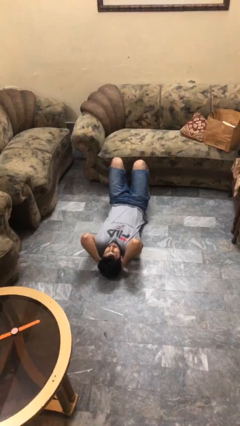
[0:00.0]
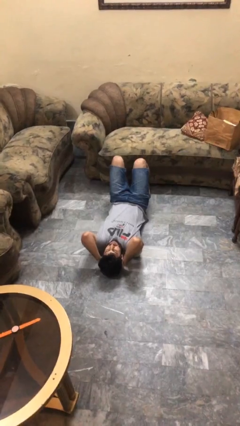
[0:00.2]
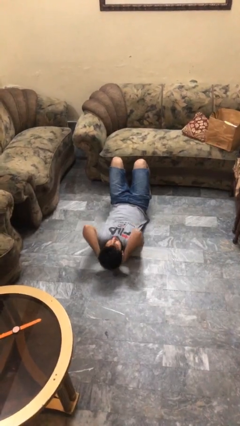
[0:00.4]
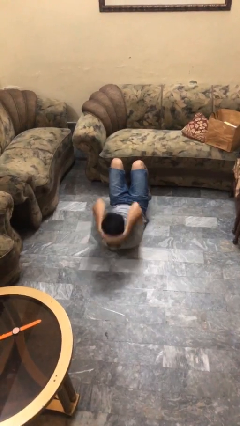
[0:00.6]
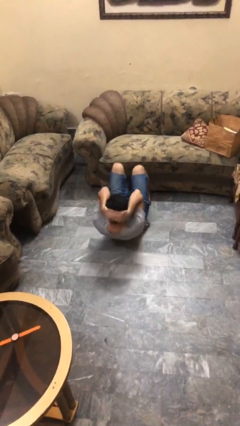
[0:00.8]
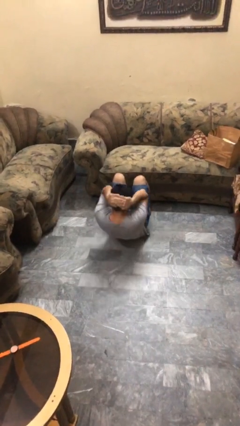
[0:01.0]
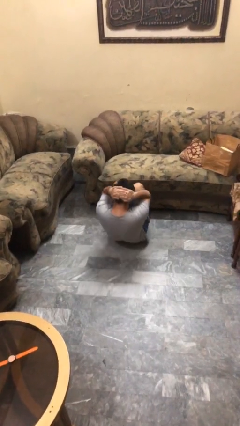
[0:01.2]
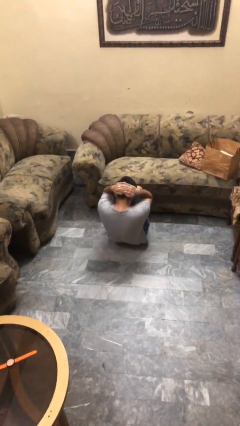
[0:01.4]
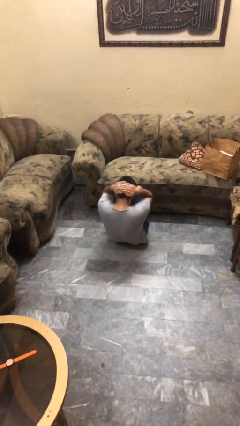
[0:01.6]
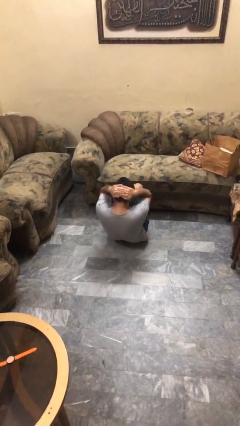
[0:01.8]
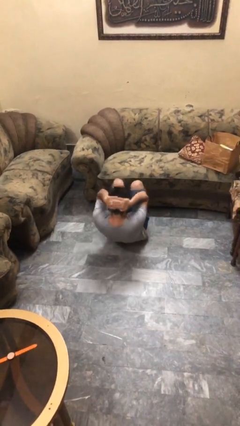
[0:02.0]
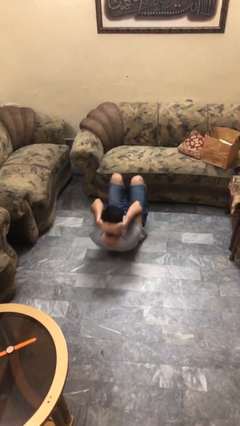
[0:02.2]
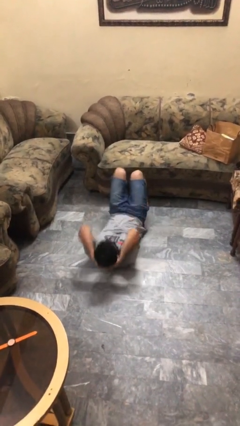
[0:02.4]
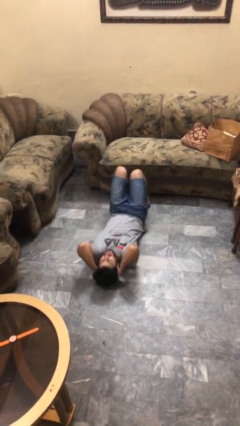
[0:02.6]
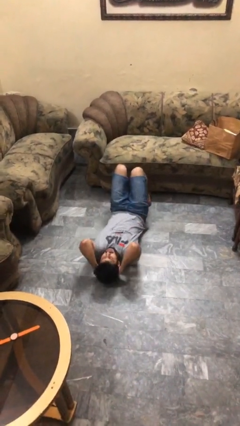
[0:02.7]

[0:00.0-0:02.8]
person exercises with situp

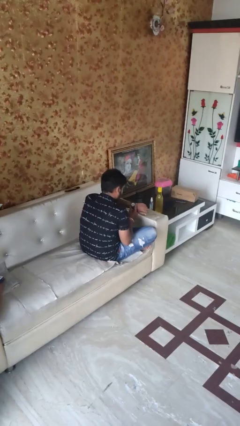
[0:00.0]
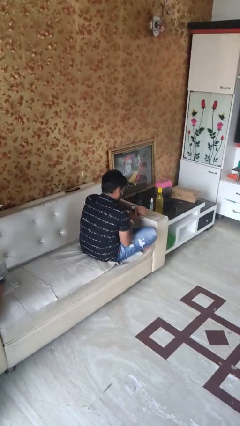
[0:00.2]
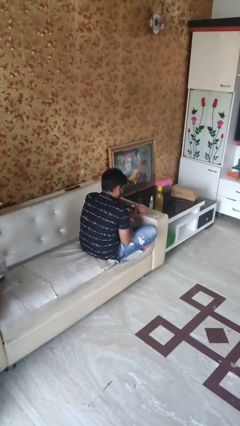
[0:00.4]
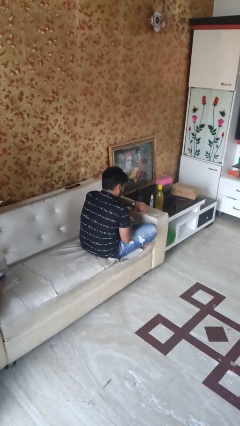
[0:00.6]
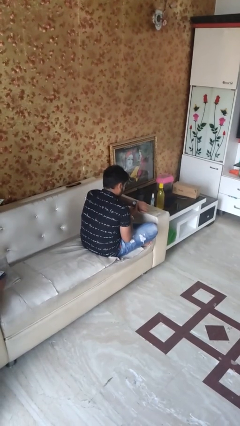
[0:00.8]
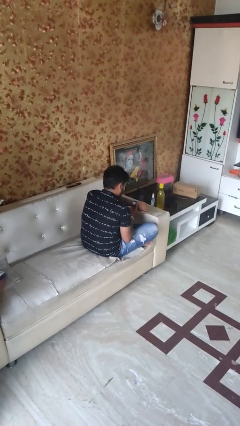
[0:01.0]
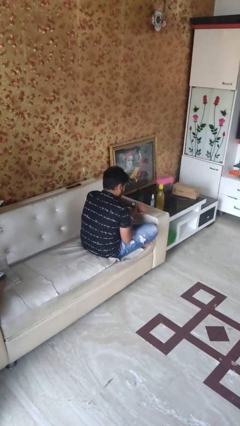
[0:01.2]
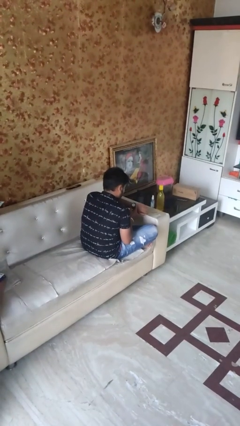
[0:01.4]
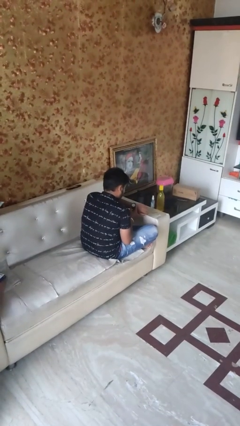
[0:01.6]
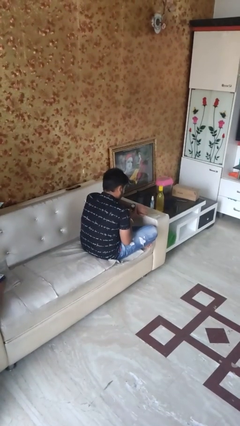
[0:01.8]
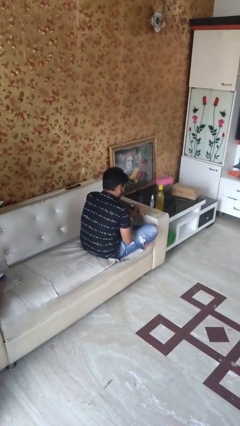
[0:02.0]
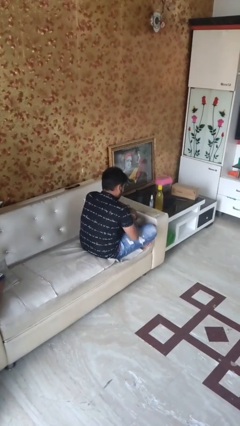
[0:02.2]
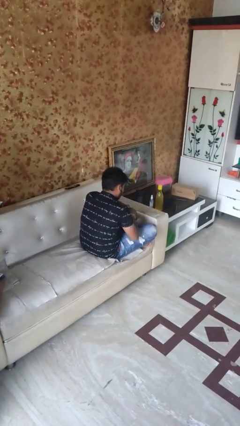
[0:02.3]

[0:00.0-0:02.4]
person looks at wristwatch

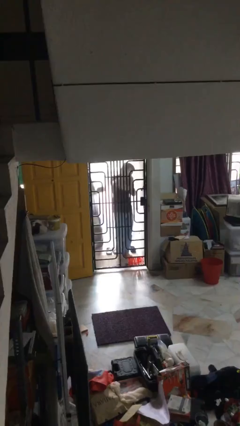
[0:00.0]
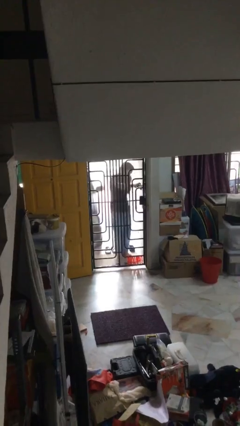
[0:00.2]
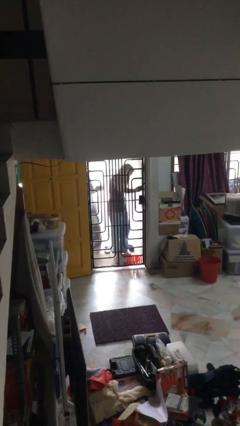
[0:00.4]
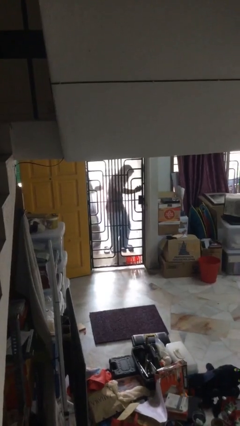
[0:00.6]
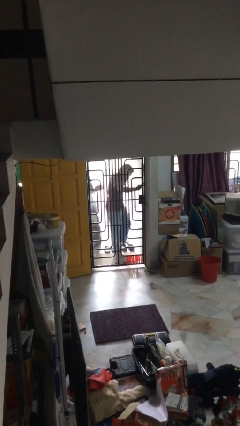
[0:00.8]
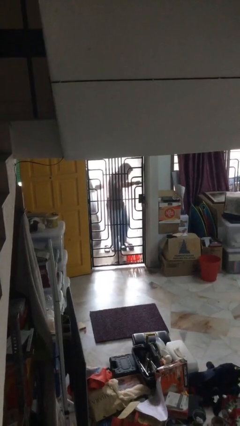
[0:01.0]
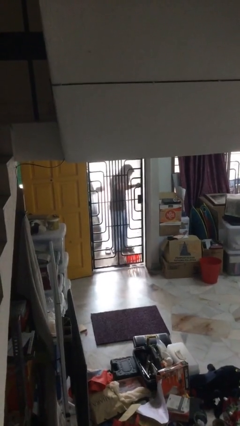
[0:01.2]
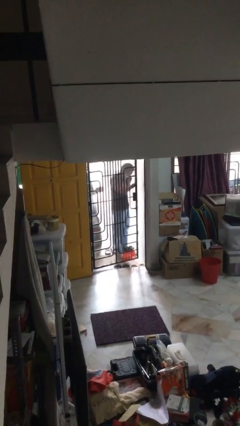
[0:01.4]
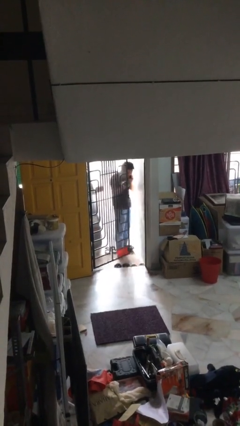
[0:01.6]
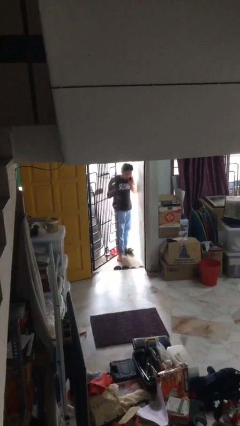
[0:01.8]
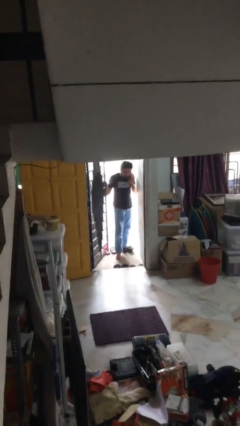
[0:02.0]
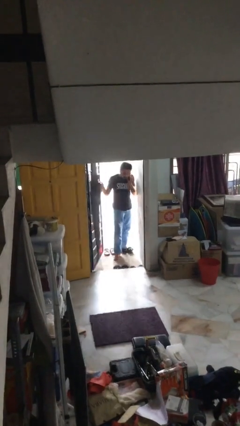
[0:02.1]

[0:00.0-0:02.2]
person opens facility door

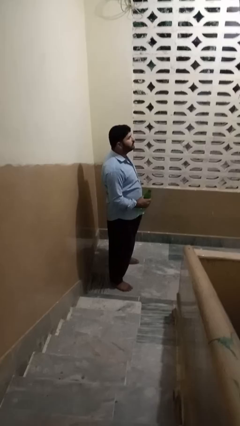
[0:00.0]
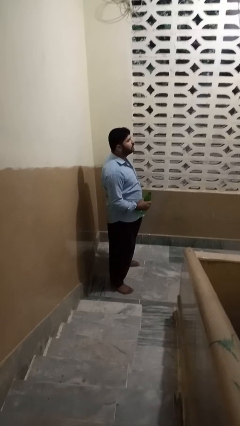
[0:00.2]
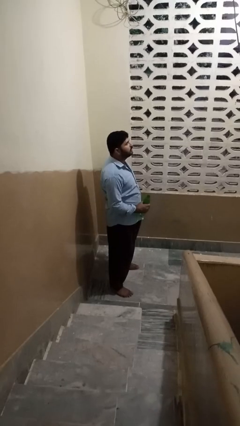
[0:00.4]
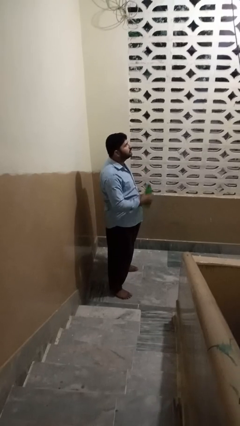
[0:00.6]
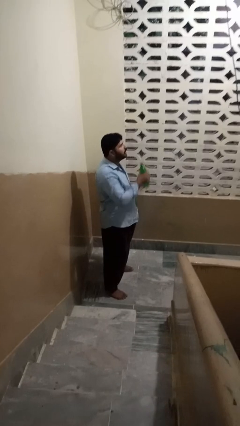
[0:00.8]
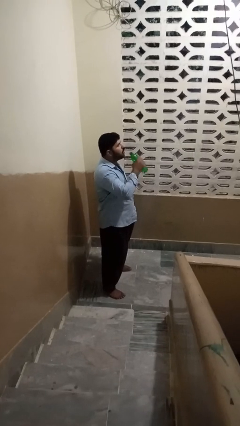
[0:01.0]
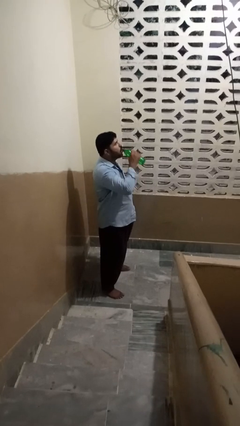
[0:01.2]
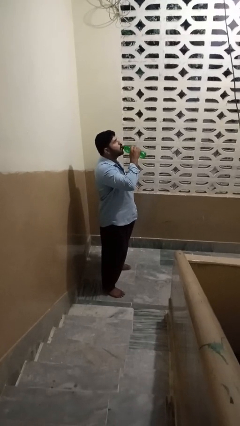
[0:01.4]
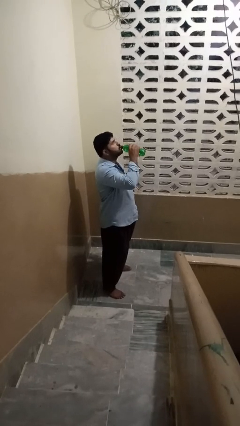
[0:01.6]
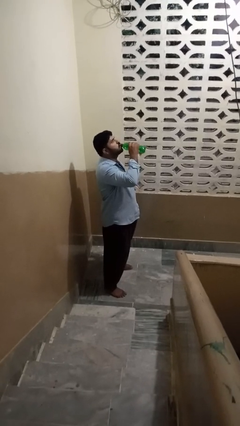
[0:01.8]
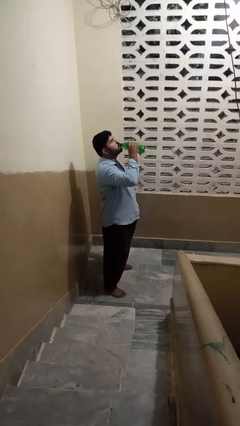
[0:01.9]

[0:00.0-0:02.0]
person drinks from bottle

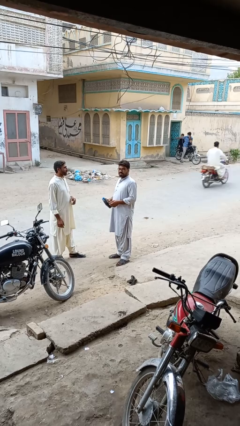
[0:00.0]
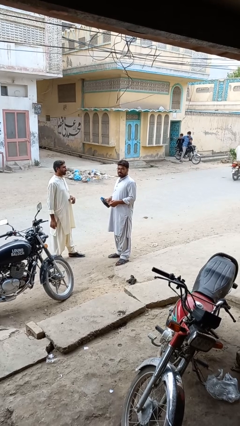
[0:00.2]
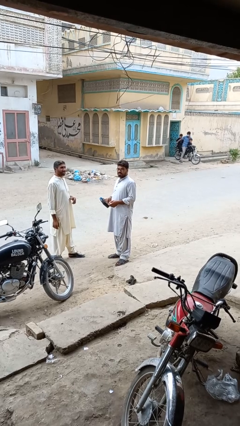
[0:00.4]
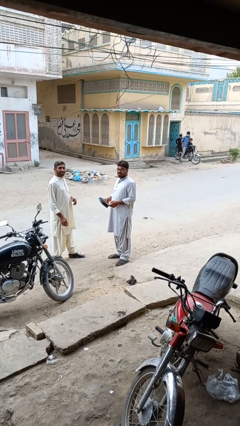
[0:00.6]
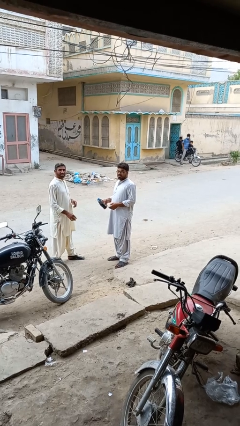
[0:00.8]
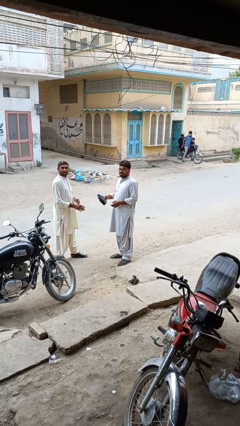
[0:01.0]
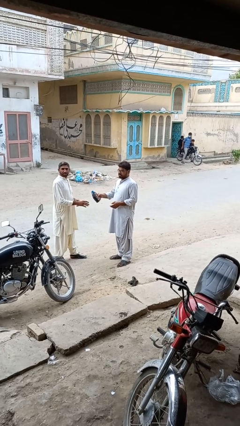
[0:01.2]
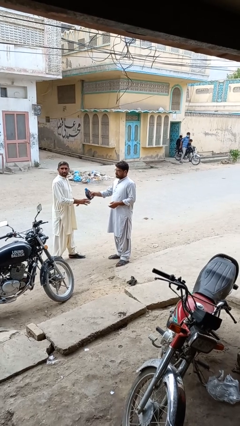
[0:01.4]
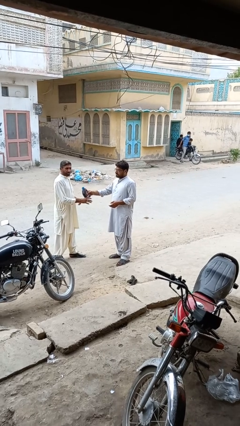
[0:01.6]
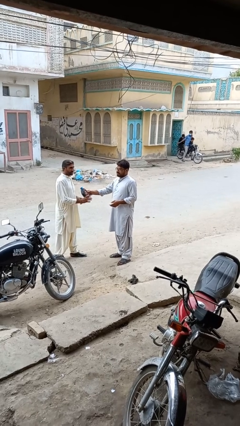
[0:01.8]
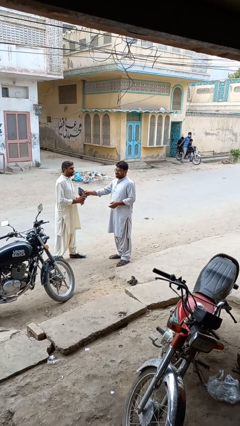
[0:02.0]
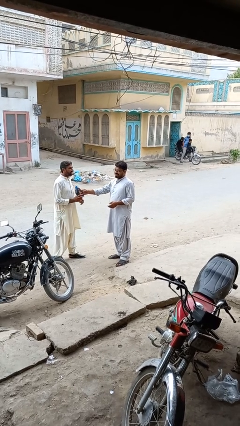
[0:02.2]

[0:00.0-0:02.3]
person transfers object to person

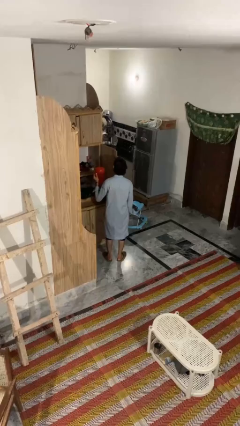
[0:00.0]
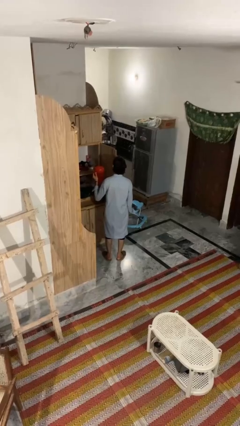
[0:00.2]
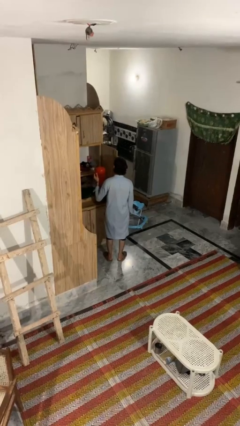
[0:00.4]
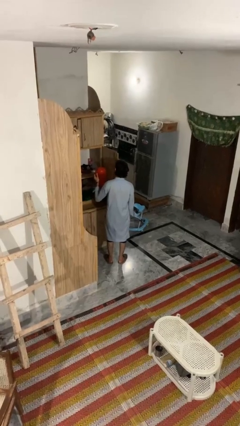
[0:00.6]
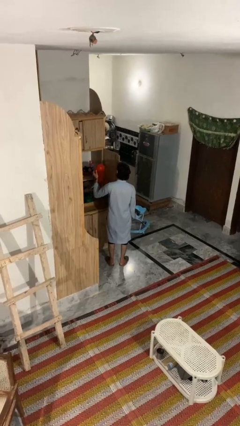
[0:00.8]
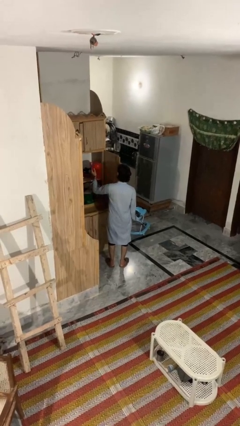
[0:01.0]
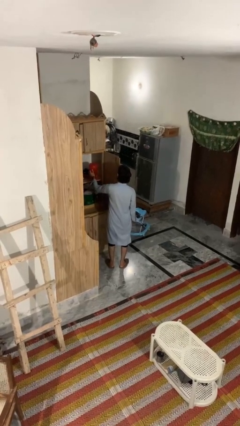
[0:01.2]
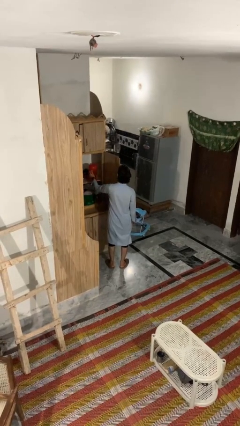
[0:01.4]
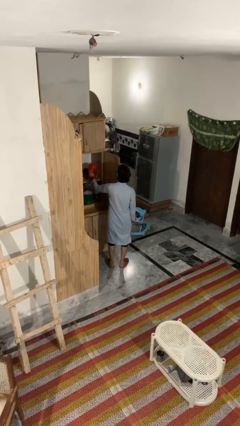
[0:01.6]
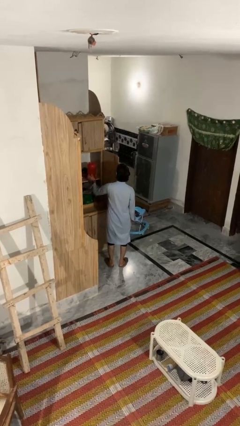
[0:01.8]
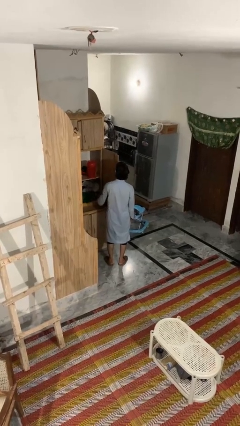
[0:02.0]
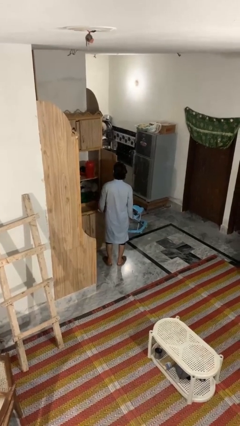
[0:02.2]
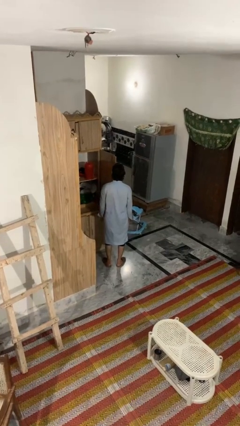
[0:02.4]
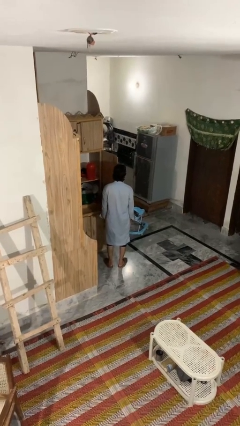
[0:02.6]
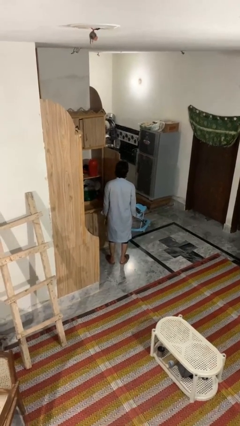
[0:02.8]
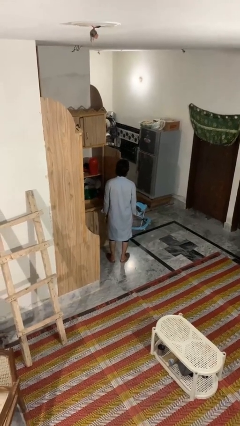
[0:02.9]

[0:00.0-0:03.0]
person puts down object into cabinet

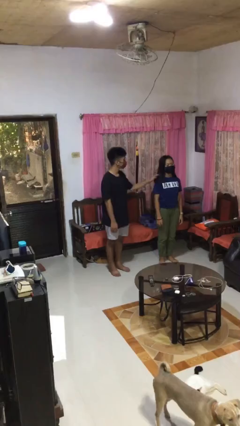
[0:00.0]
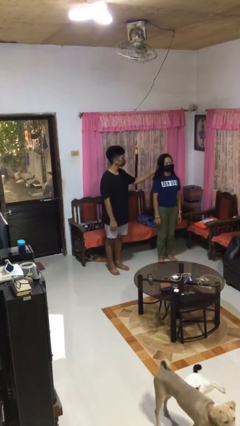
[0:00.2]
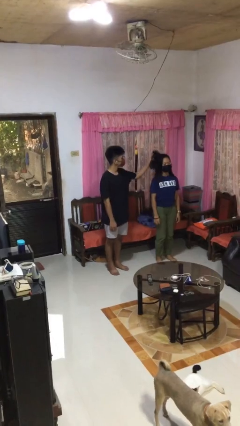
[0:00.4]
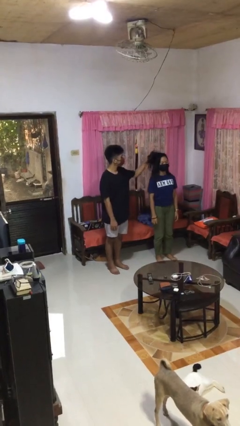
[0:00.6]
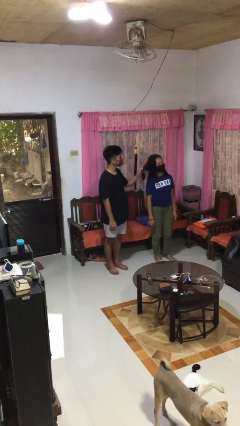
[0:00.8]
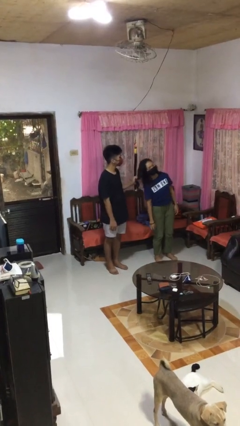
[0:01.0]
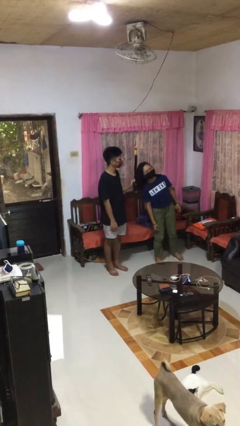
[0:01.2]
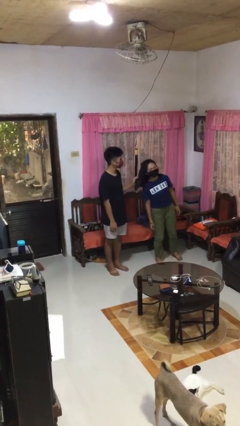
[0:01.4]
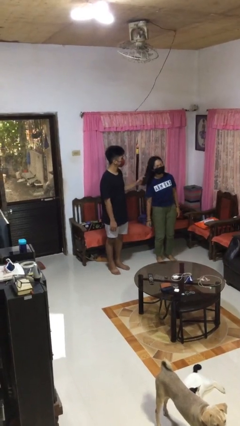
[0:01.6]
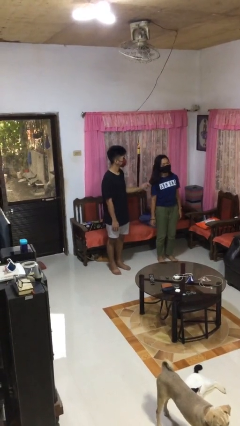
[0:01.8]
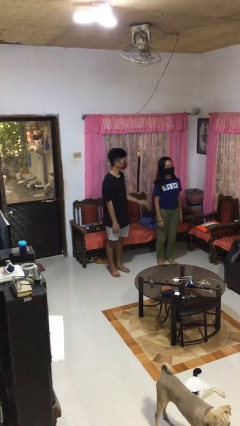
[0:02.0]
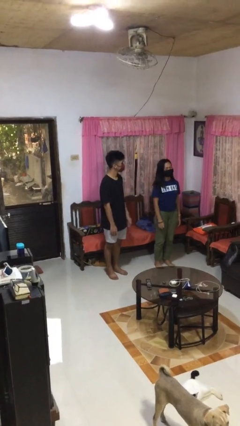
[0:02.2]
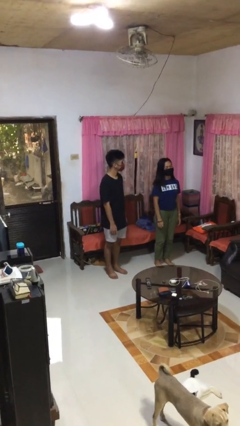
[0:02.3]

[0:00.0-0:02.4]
person grabs person by hair

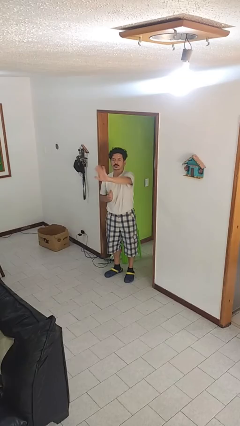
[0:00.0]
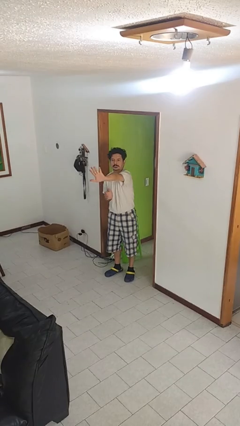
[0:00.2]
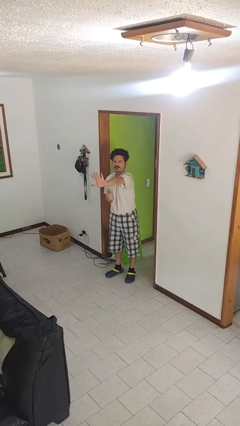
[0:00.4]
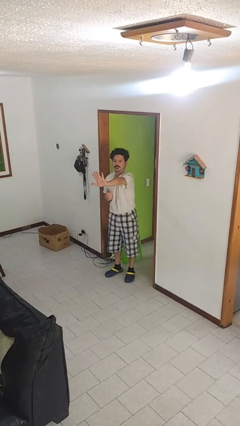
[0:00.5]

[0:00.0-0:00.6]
person gestures stop
